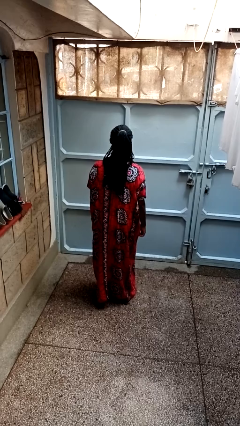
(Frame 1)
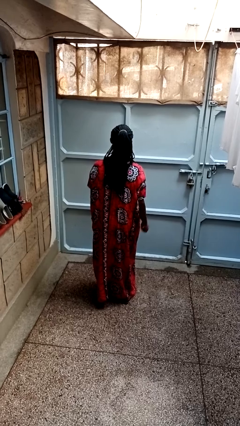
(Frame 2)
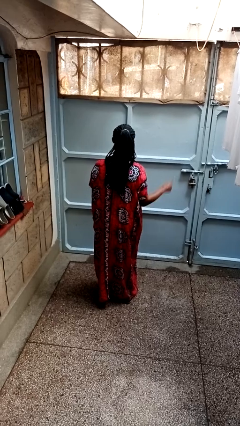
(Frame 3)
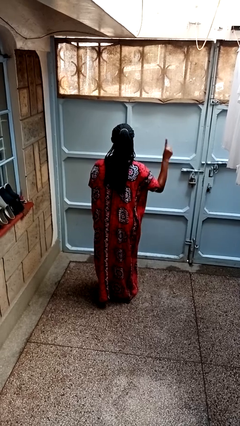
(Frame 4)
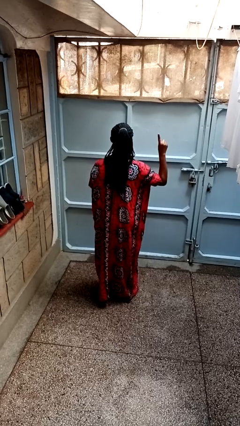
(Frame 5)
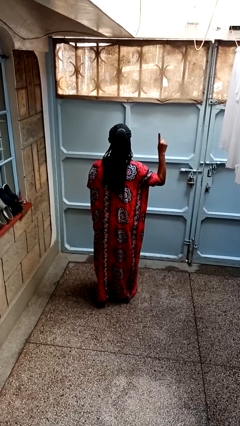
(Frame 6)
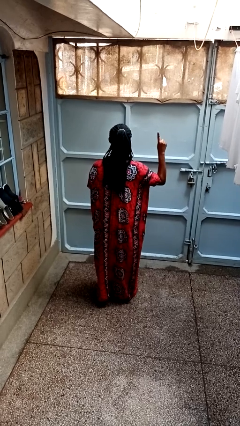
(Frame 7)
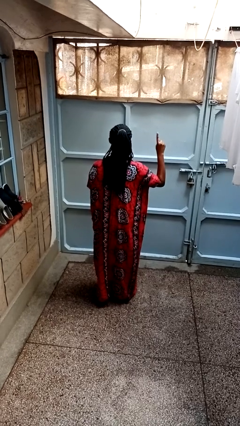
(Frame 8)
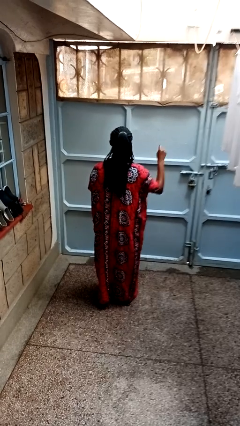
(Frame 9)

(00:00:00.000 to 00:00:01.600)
person gestures number one

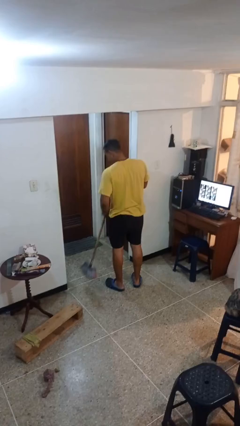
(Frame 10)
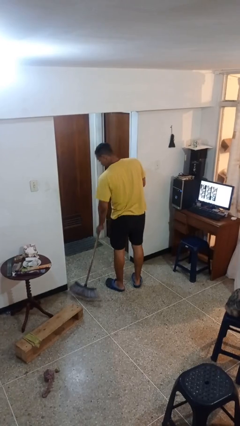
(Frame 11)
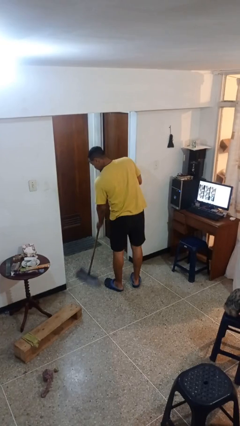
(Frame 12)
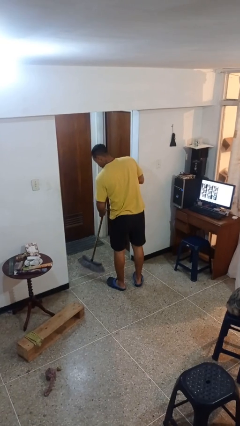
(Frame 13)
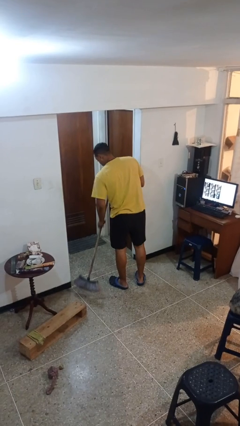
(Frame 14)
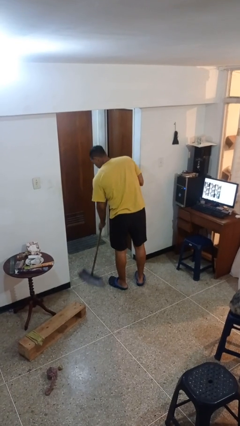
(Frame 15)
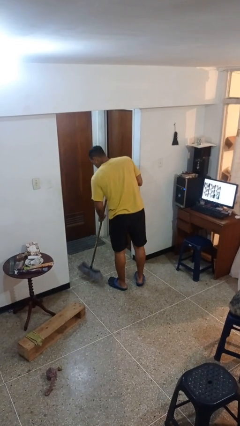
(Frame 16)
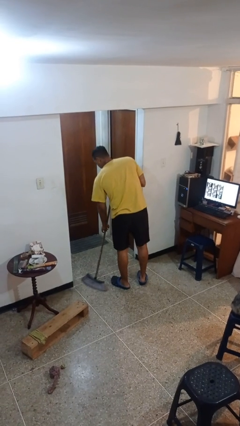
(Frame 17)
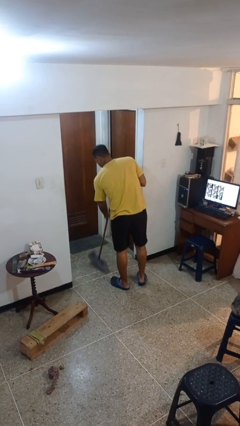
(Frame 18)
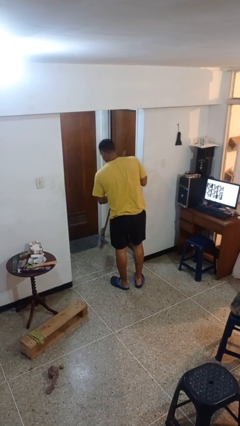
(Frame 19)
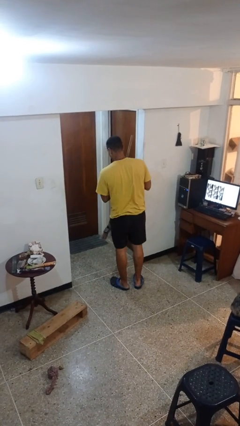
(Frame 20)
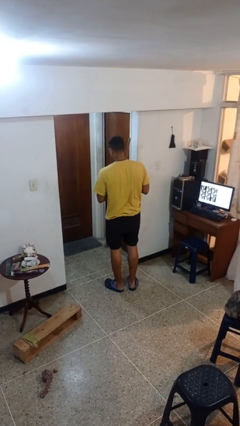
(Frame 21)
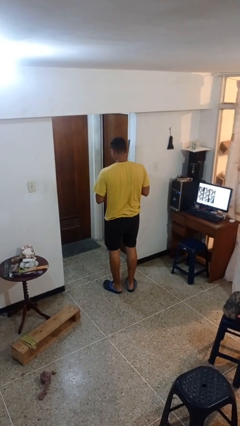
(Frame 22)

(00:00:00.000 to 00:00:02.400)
person sweeps floor

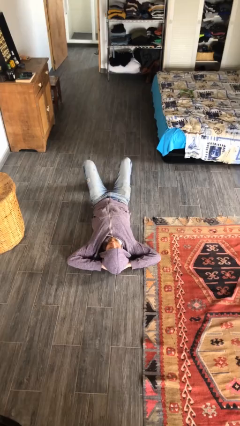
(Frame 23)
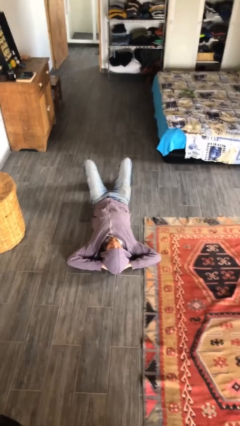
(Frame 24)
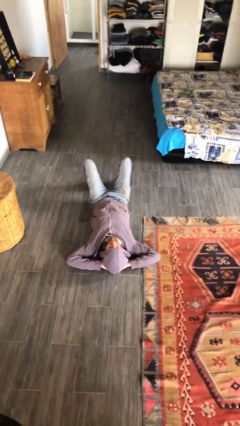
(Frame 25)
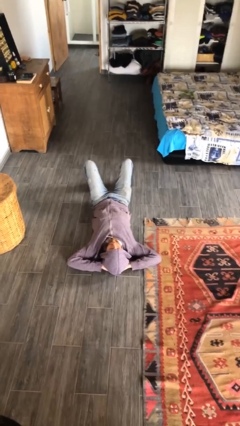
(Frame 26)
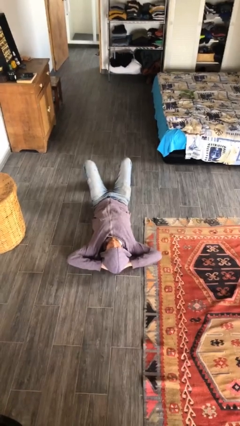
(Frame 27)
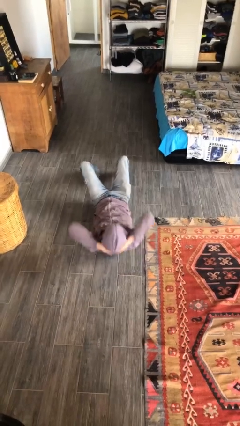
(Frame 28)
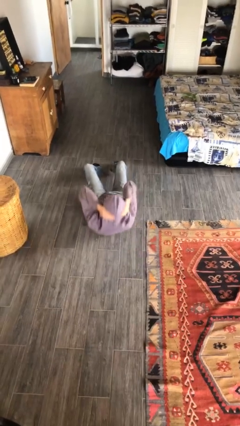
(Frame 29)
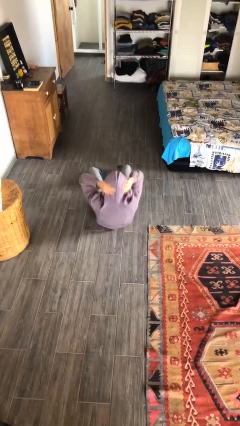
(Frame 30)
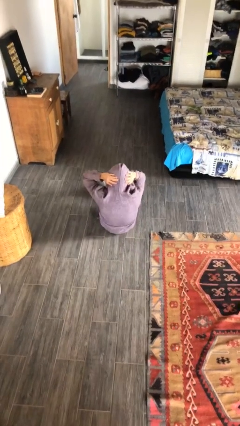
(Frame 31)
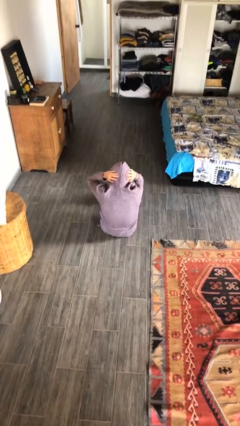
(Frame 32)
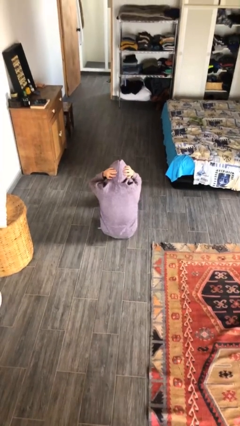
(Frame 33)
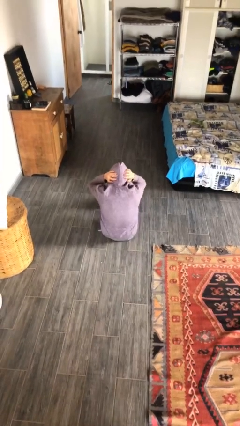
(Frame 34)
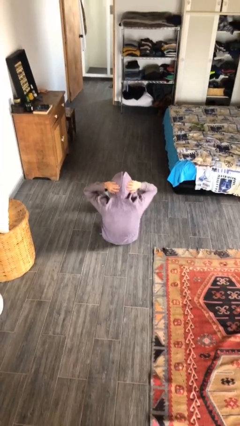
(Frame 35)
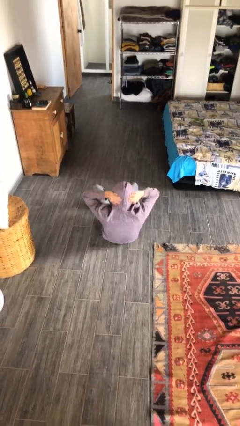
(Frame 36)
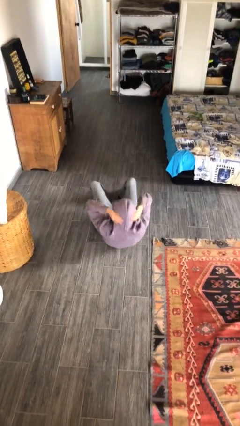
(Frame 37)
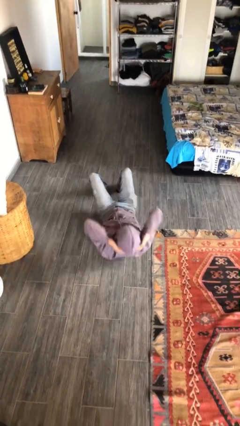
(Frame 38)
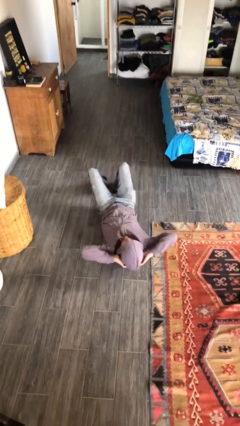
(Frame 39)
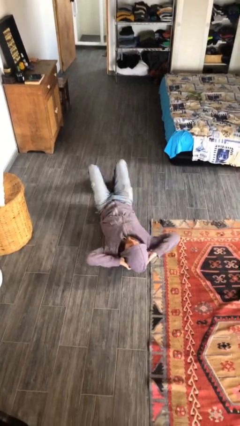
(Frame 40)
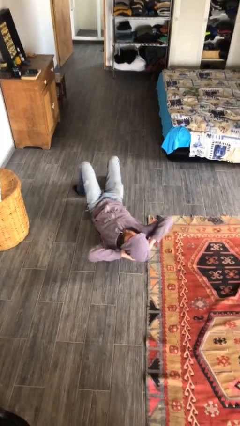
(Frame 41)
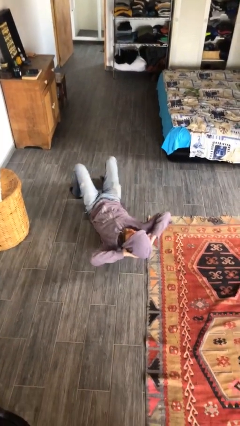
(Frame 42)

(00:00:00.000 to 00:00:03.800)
person exercises with situp

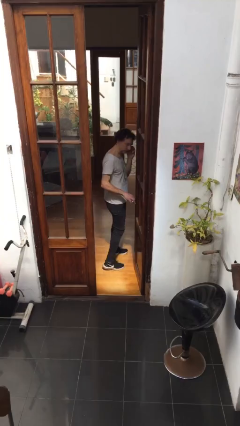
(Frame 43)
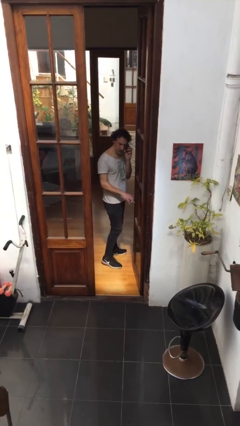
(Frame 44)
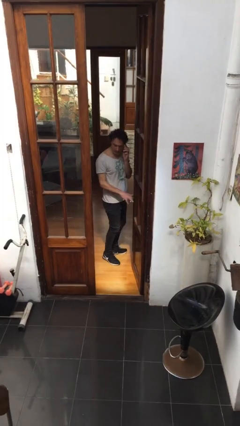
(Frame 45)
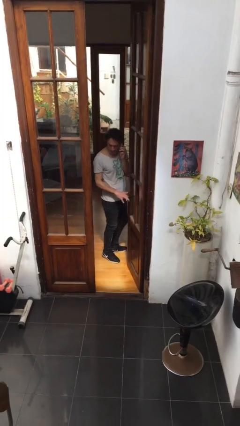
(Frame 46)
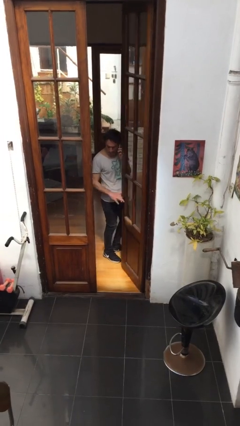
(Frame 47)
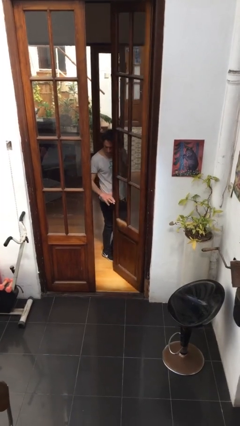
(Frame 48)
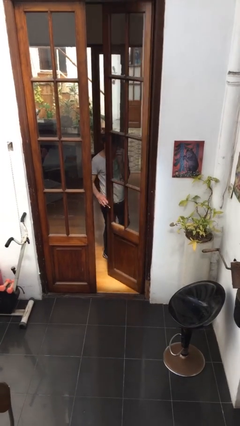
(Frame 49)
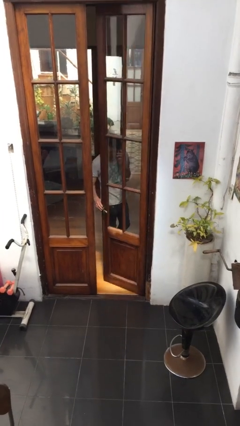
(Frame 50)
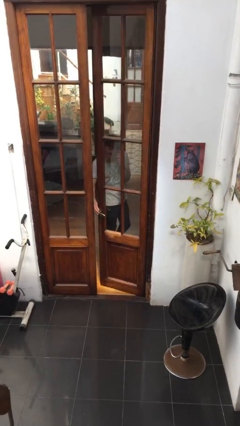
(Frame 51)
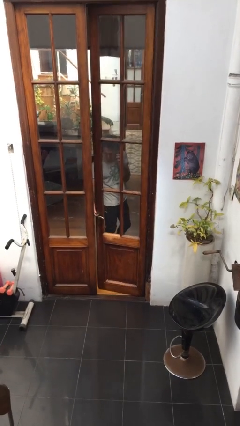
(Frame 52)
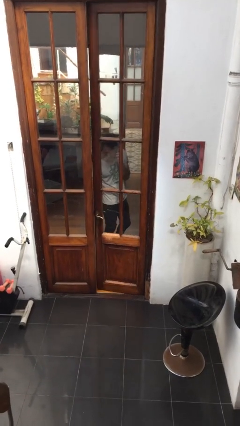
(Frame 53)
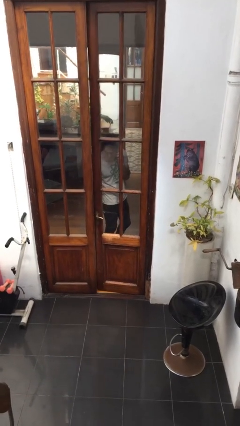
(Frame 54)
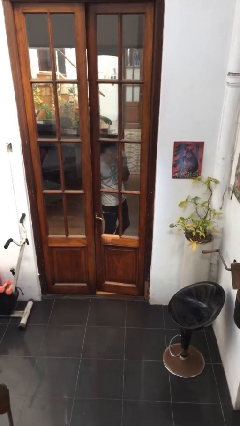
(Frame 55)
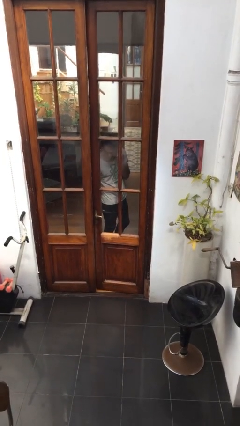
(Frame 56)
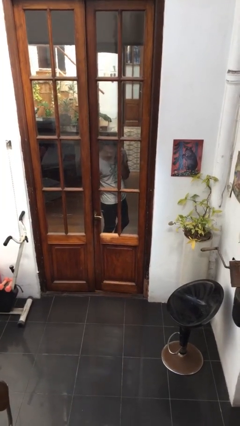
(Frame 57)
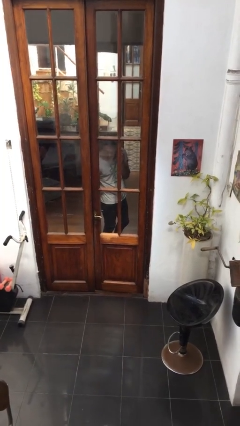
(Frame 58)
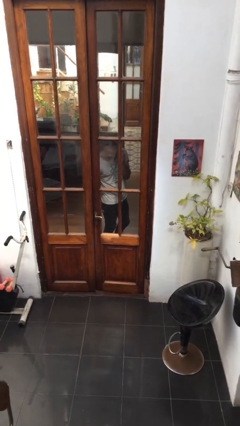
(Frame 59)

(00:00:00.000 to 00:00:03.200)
person closes facility door

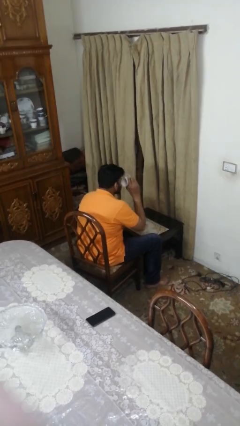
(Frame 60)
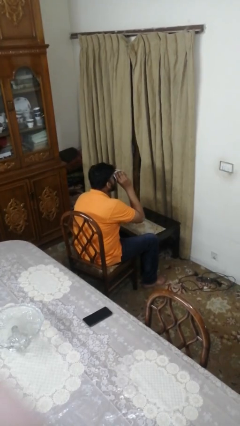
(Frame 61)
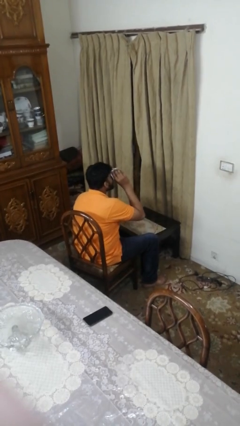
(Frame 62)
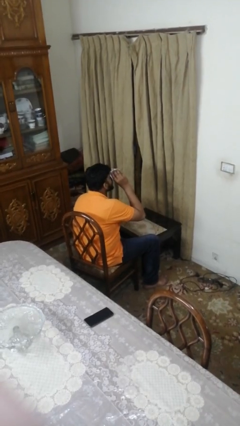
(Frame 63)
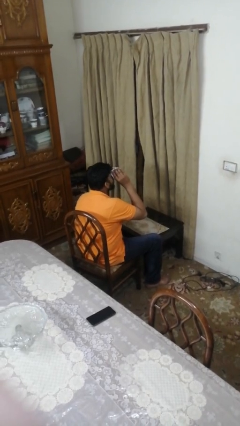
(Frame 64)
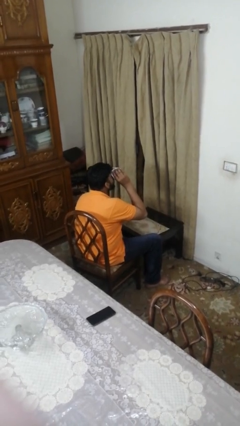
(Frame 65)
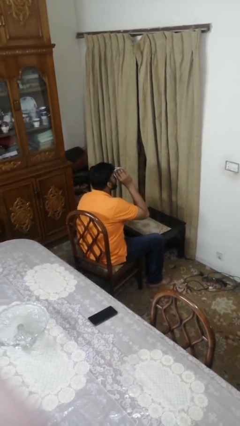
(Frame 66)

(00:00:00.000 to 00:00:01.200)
person drinks from mug

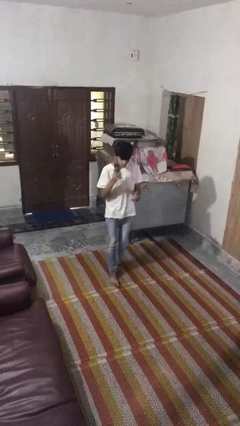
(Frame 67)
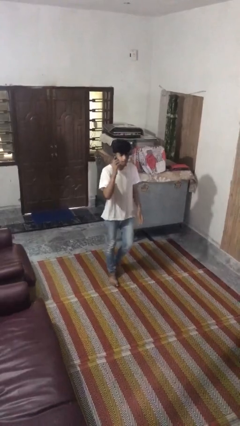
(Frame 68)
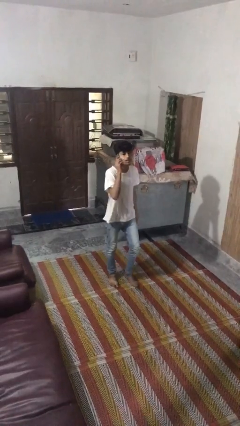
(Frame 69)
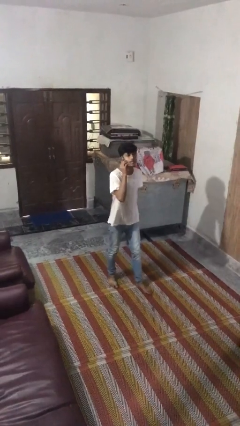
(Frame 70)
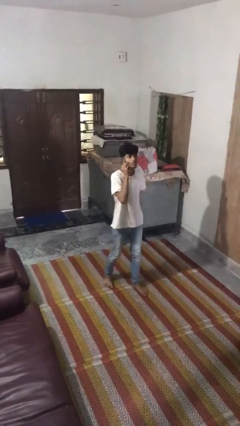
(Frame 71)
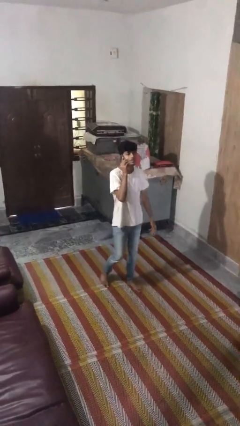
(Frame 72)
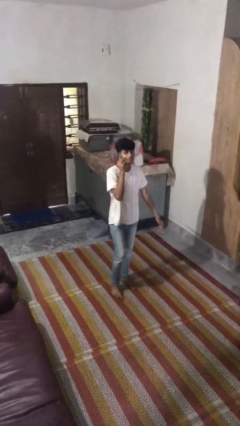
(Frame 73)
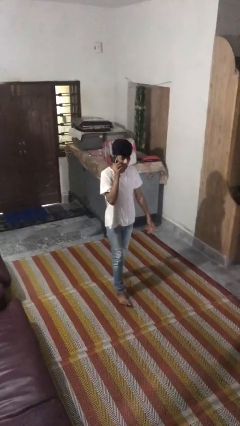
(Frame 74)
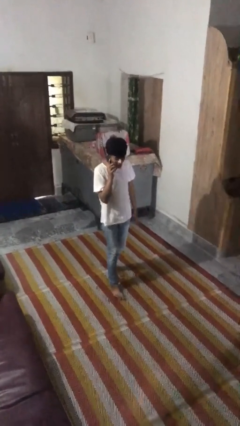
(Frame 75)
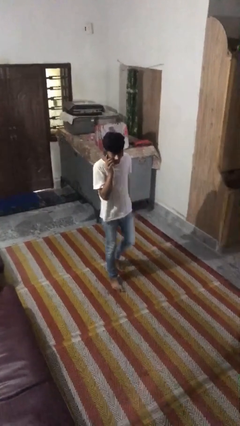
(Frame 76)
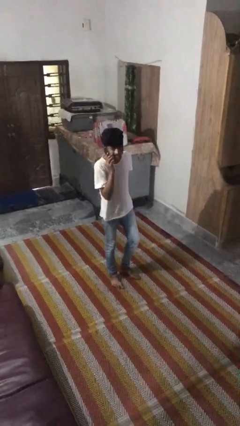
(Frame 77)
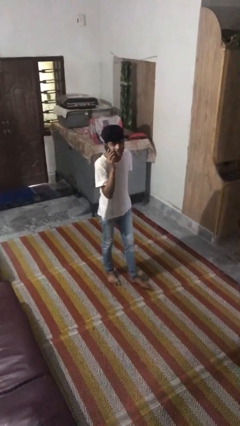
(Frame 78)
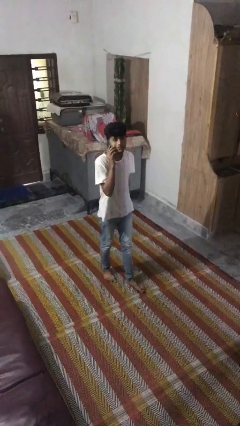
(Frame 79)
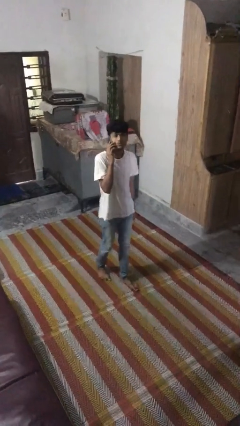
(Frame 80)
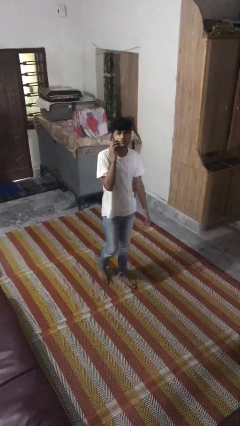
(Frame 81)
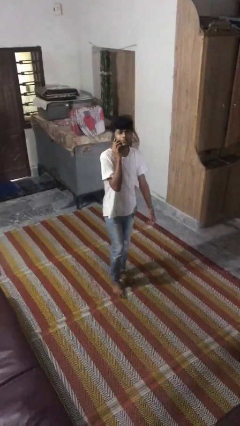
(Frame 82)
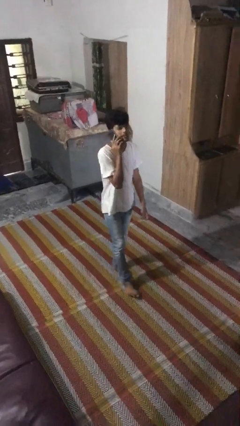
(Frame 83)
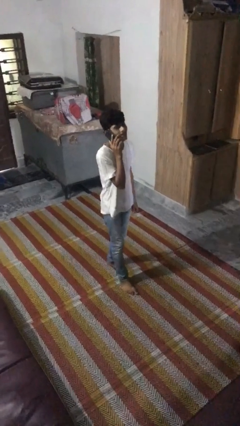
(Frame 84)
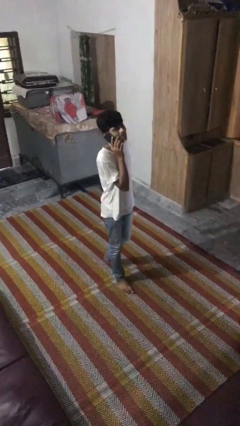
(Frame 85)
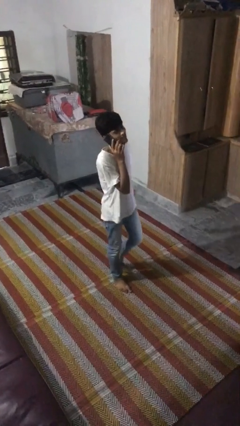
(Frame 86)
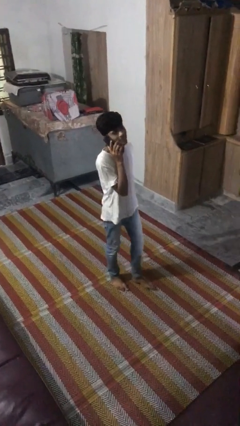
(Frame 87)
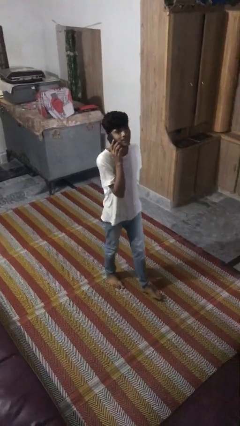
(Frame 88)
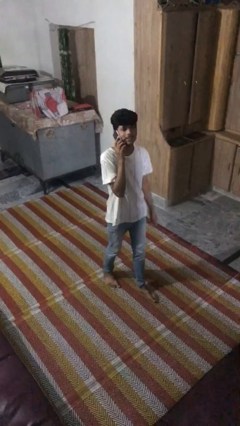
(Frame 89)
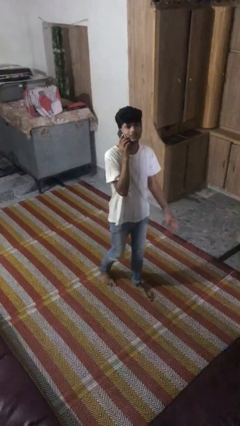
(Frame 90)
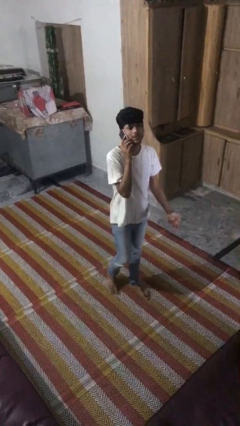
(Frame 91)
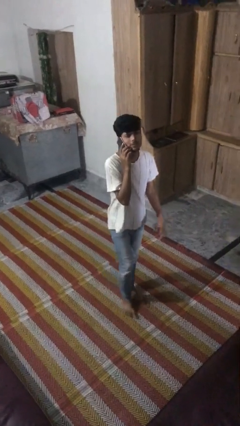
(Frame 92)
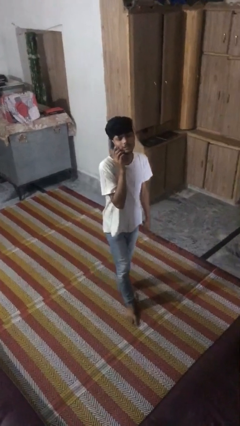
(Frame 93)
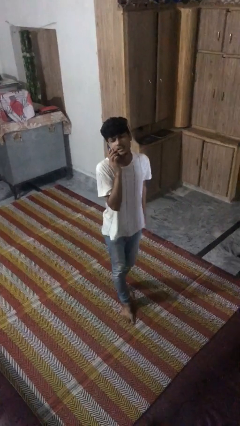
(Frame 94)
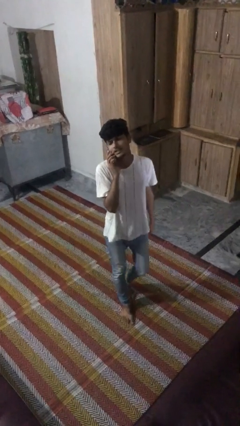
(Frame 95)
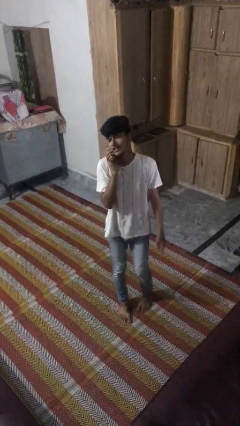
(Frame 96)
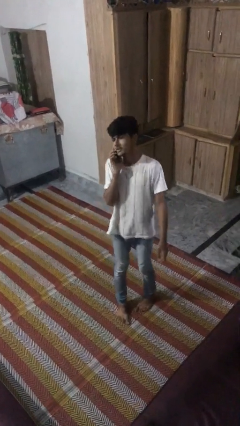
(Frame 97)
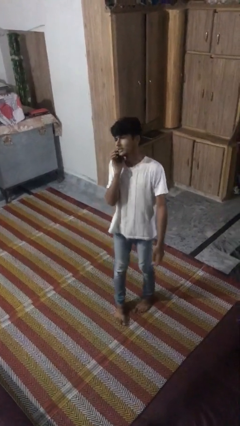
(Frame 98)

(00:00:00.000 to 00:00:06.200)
person talks on phone
